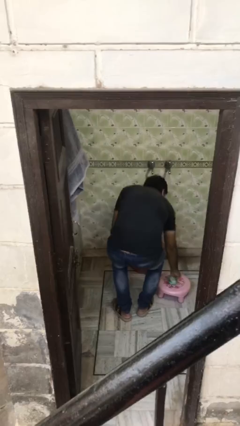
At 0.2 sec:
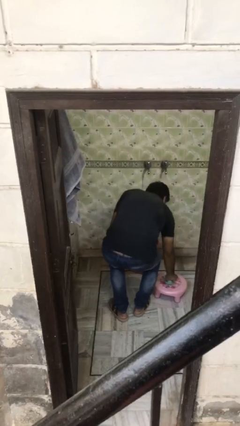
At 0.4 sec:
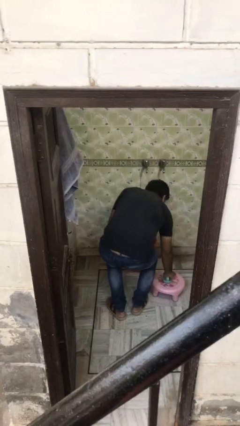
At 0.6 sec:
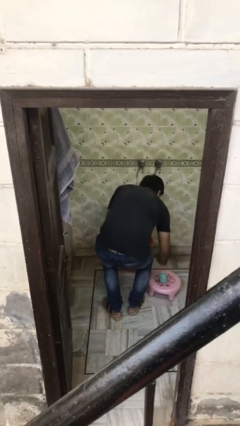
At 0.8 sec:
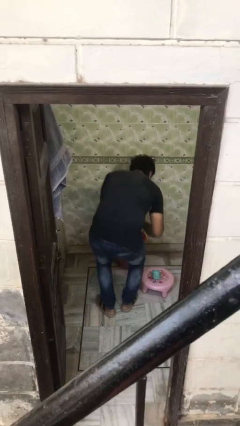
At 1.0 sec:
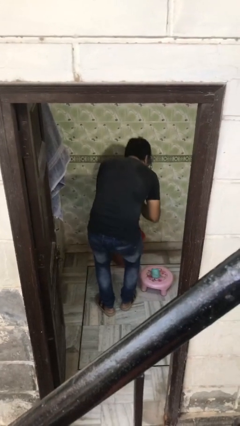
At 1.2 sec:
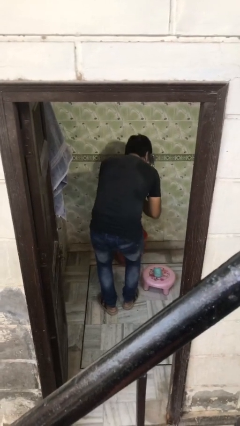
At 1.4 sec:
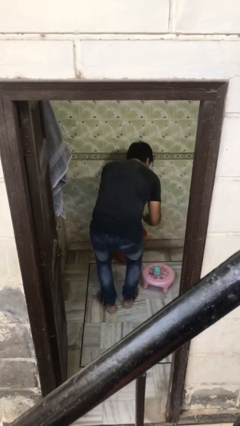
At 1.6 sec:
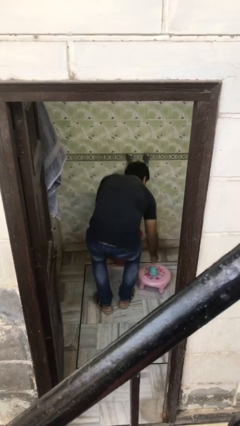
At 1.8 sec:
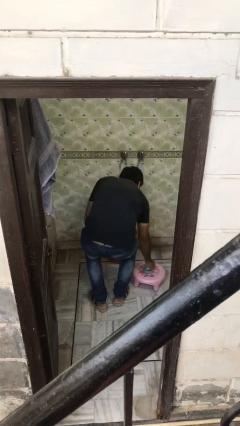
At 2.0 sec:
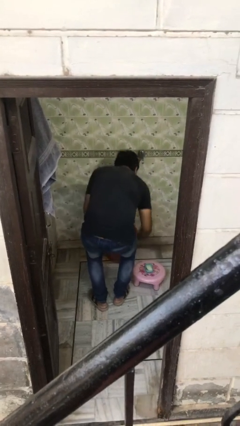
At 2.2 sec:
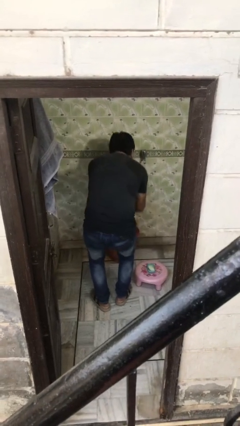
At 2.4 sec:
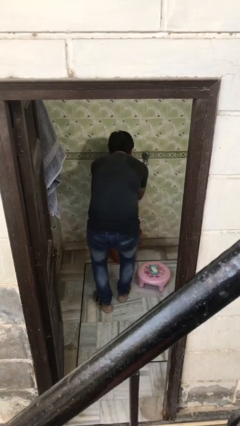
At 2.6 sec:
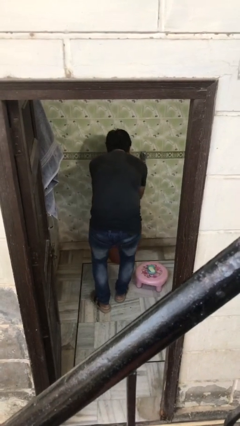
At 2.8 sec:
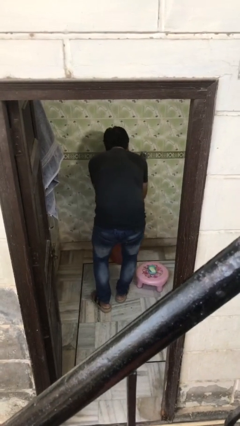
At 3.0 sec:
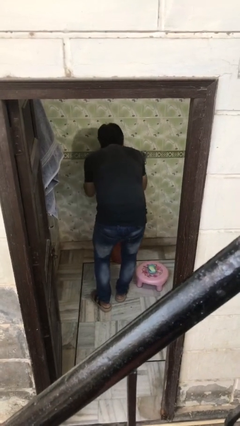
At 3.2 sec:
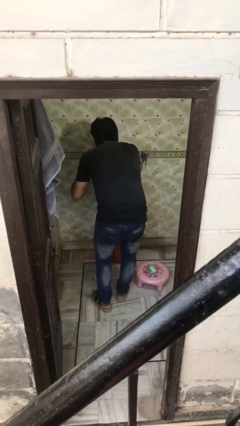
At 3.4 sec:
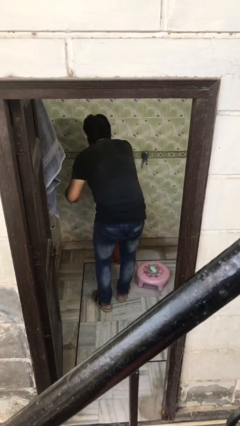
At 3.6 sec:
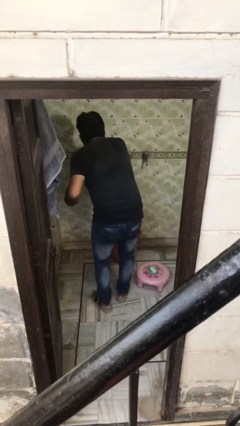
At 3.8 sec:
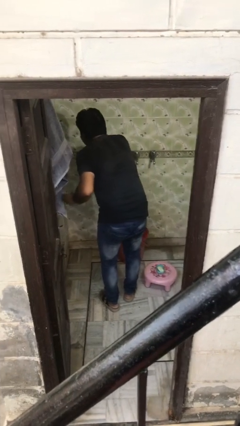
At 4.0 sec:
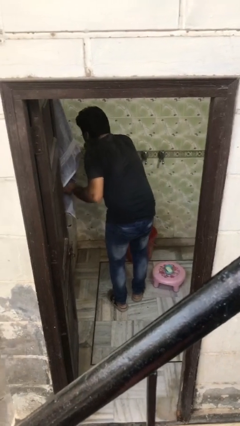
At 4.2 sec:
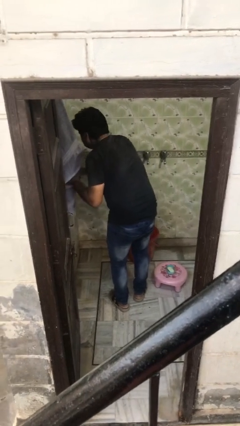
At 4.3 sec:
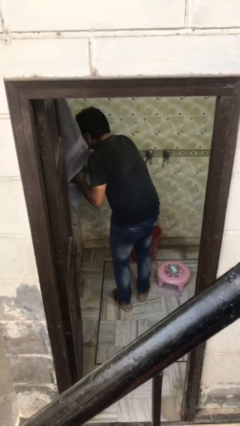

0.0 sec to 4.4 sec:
person washes face

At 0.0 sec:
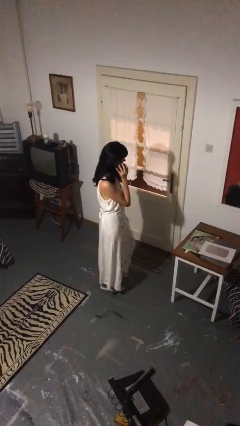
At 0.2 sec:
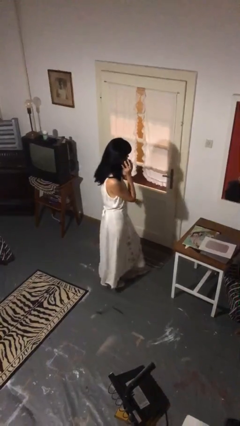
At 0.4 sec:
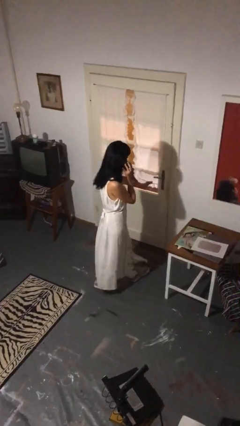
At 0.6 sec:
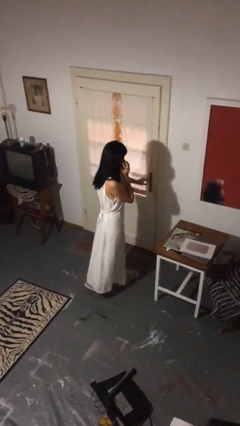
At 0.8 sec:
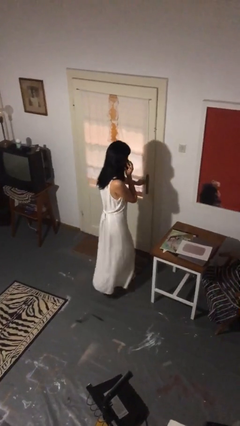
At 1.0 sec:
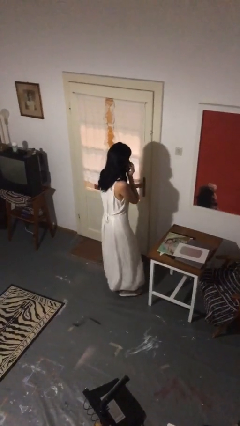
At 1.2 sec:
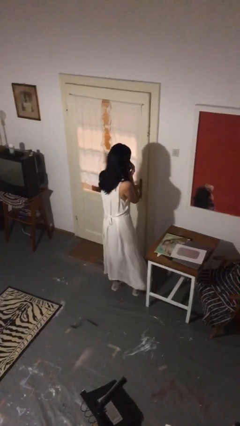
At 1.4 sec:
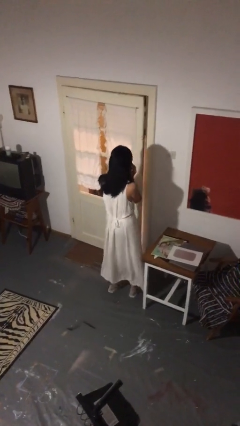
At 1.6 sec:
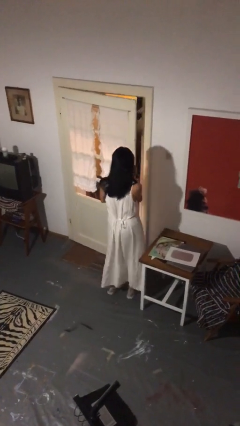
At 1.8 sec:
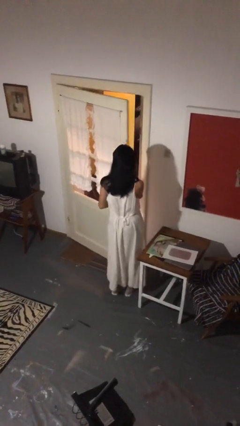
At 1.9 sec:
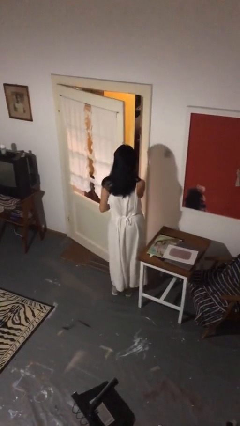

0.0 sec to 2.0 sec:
person opens facility door

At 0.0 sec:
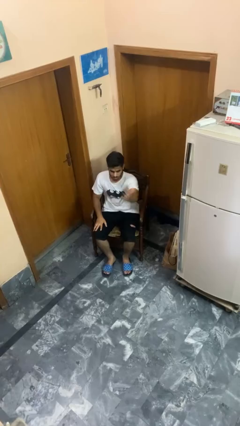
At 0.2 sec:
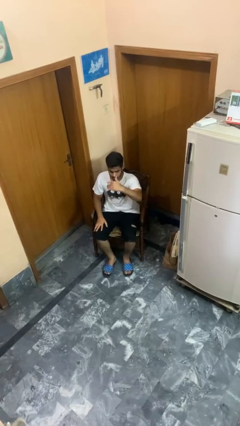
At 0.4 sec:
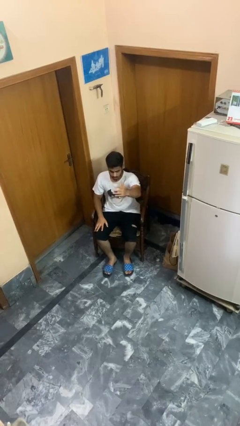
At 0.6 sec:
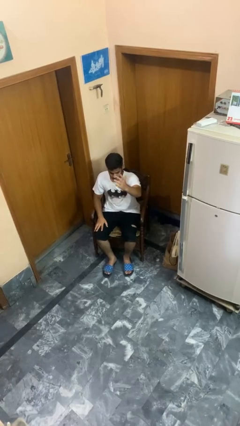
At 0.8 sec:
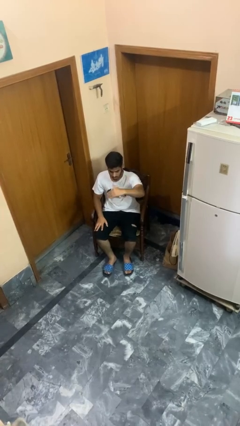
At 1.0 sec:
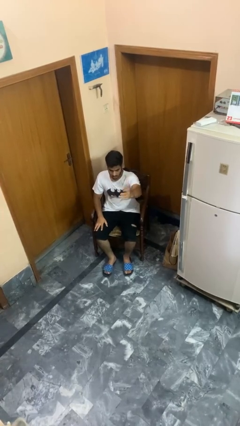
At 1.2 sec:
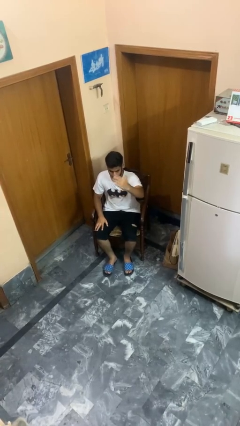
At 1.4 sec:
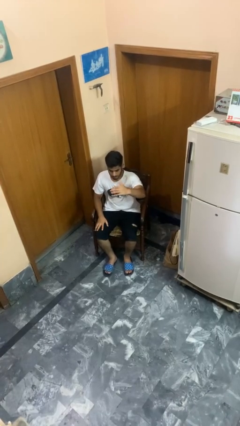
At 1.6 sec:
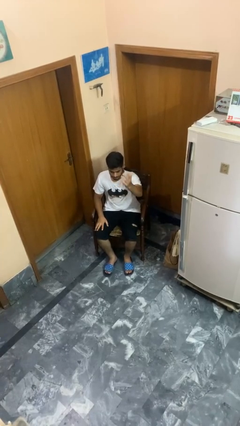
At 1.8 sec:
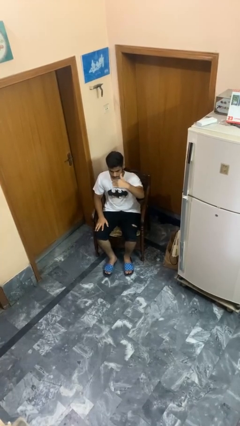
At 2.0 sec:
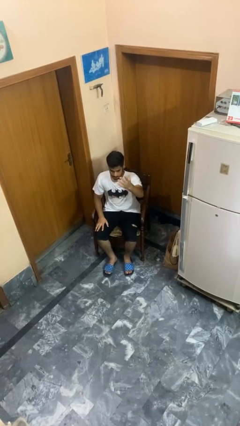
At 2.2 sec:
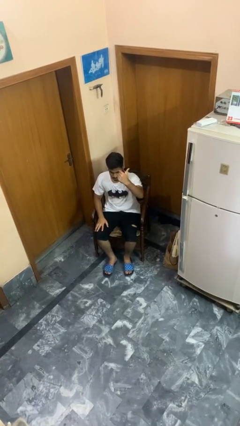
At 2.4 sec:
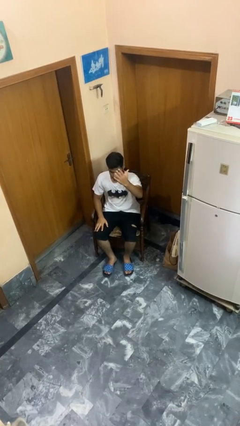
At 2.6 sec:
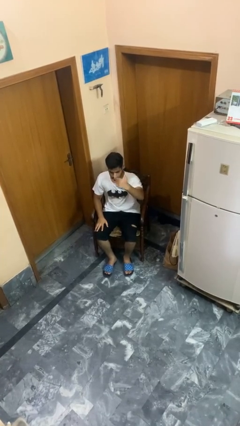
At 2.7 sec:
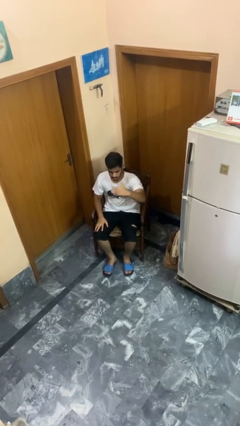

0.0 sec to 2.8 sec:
person gestures come here

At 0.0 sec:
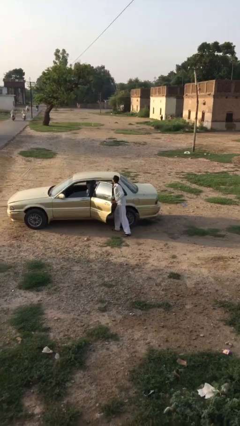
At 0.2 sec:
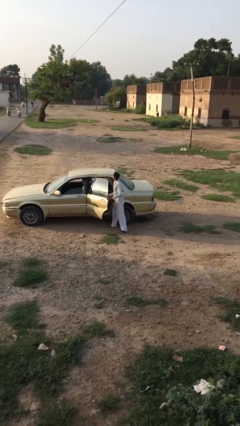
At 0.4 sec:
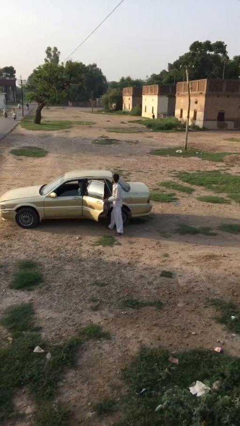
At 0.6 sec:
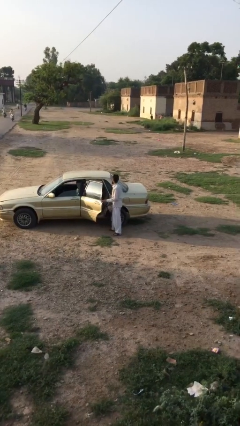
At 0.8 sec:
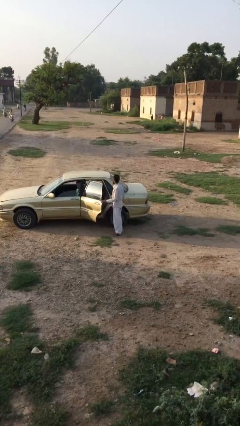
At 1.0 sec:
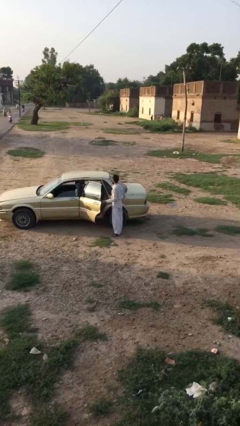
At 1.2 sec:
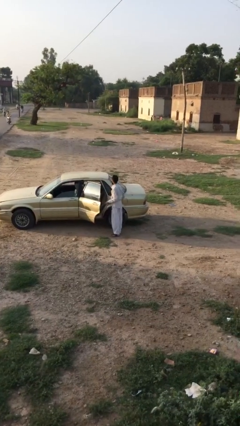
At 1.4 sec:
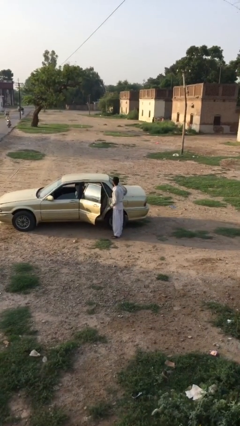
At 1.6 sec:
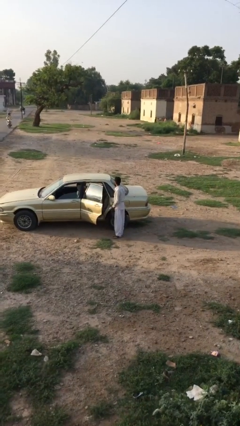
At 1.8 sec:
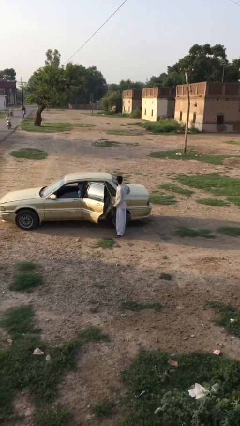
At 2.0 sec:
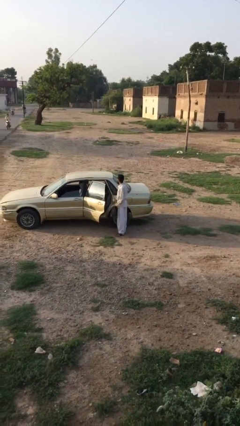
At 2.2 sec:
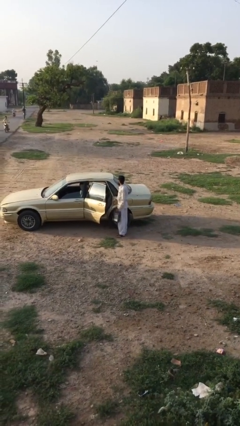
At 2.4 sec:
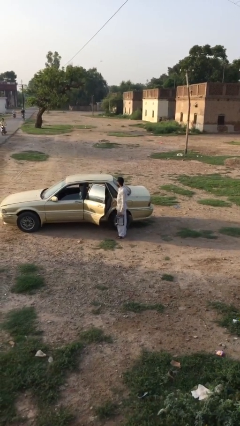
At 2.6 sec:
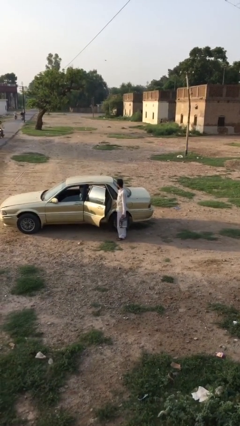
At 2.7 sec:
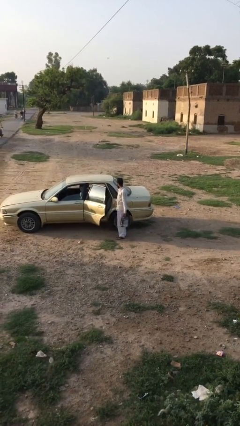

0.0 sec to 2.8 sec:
person unloads car

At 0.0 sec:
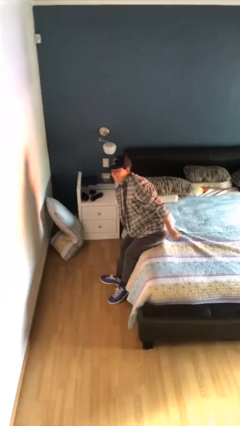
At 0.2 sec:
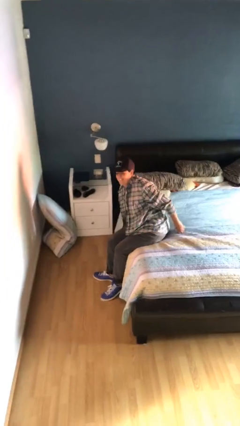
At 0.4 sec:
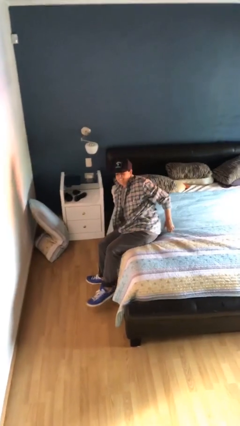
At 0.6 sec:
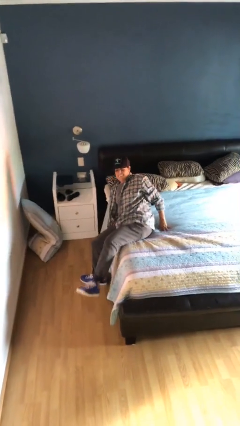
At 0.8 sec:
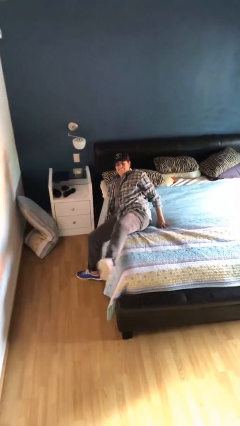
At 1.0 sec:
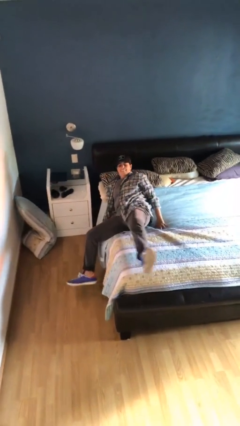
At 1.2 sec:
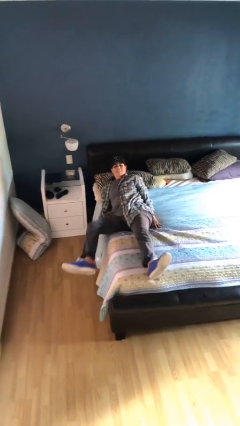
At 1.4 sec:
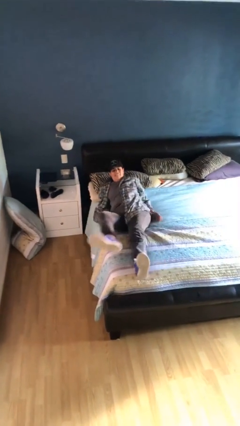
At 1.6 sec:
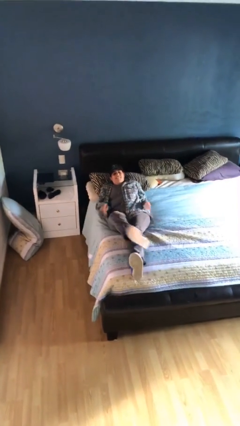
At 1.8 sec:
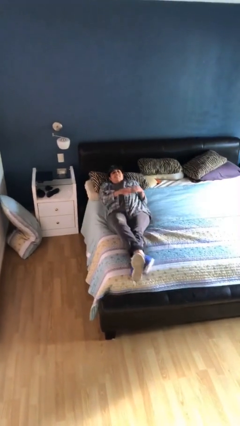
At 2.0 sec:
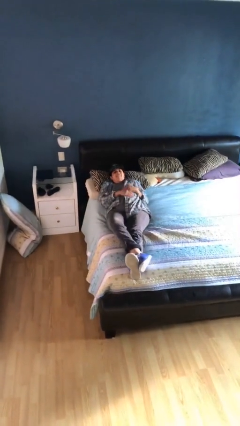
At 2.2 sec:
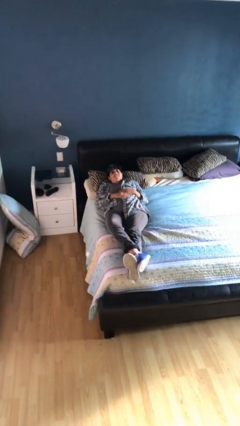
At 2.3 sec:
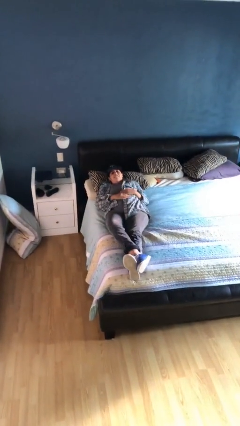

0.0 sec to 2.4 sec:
person lies down on bed

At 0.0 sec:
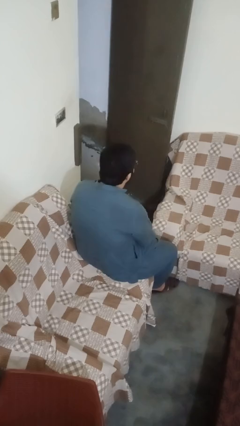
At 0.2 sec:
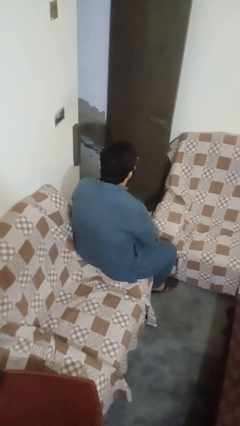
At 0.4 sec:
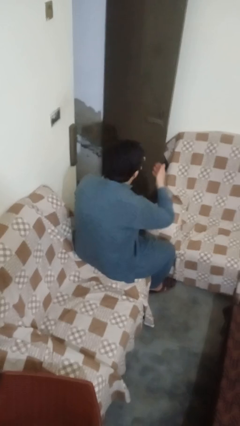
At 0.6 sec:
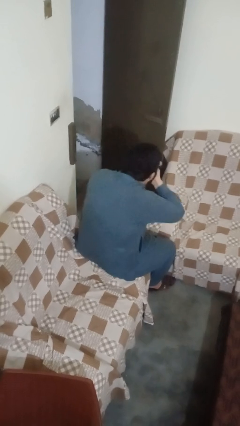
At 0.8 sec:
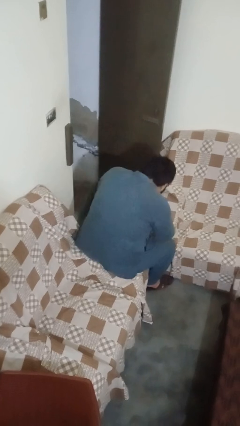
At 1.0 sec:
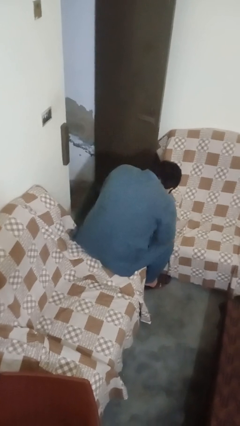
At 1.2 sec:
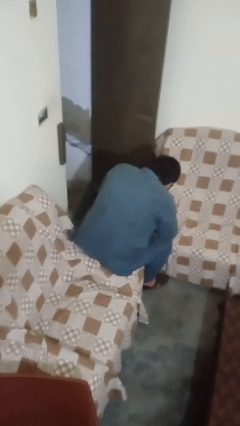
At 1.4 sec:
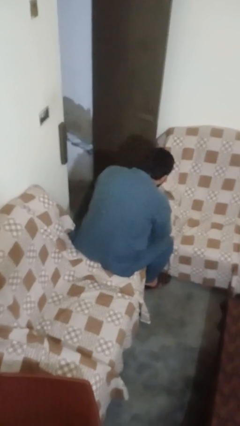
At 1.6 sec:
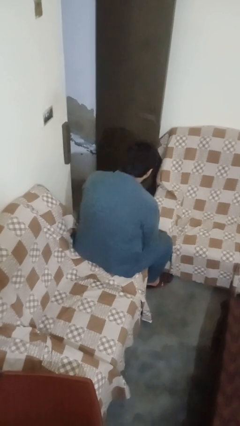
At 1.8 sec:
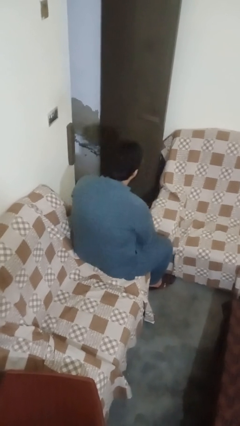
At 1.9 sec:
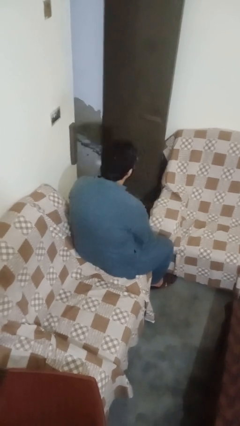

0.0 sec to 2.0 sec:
person sneezes into hand

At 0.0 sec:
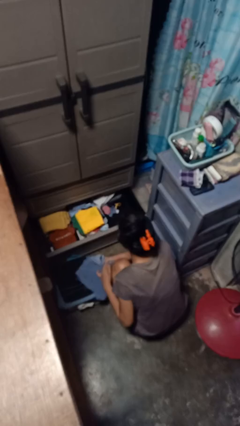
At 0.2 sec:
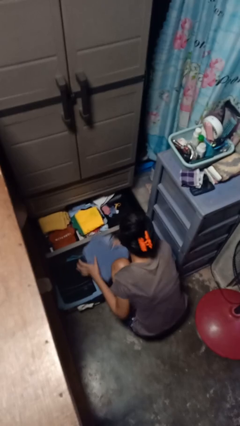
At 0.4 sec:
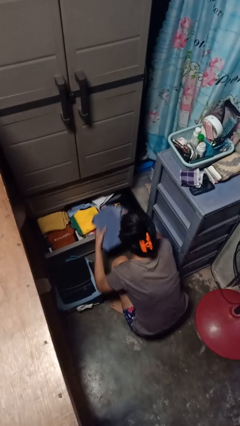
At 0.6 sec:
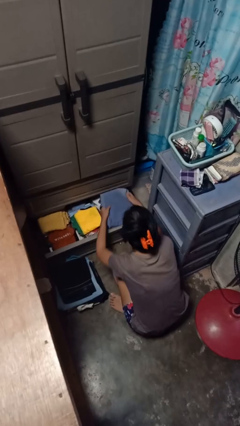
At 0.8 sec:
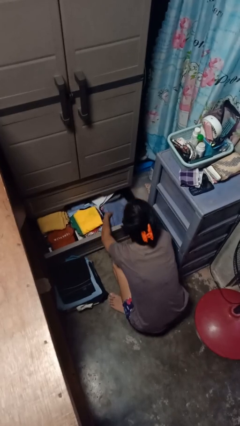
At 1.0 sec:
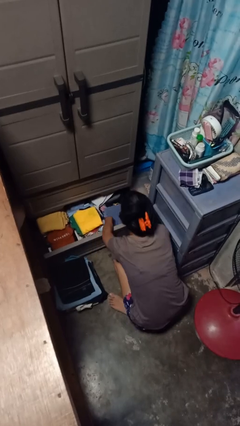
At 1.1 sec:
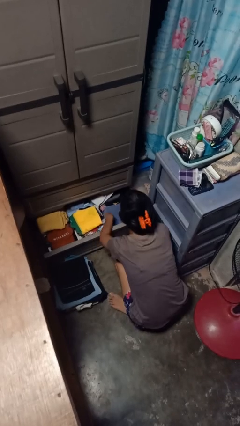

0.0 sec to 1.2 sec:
person puts clothes into dresser
